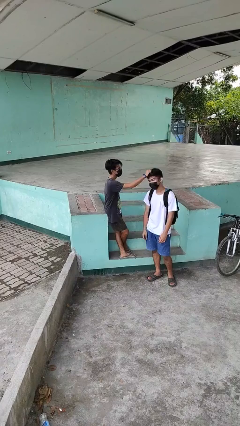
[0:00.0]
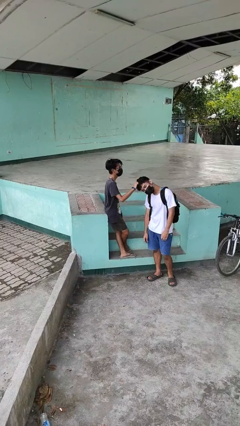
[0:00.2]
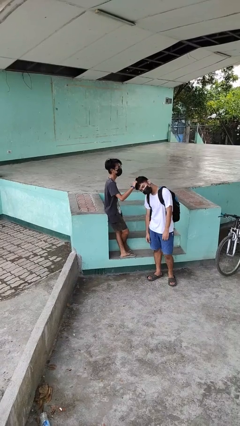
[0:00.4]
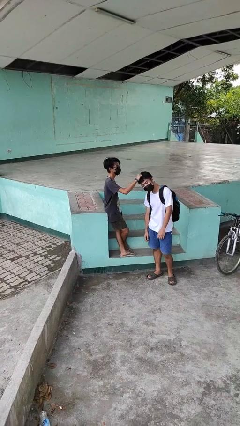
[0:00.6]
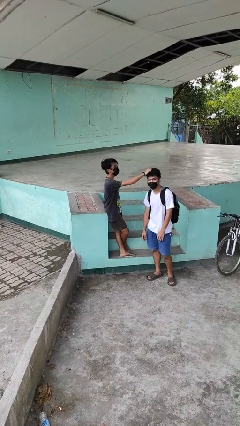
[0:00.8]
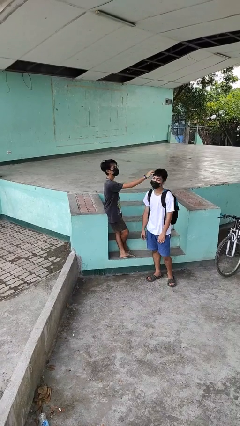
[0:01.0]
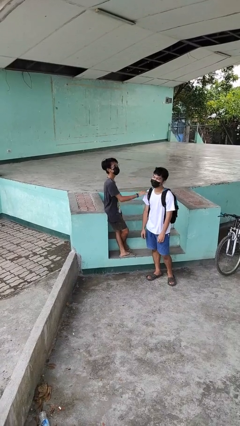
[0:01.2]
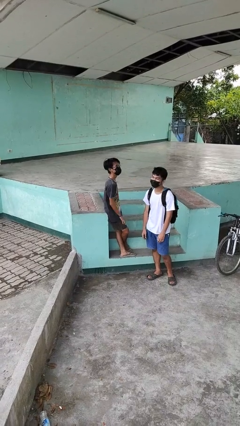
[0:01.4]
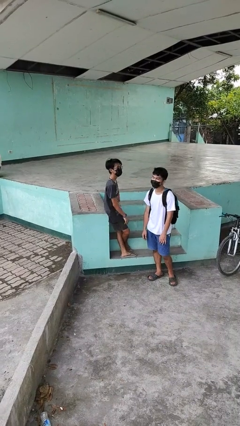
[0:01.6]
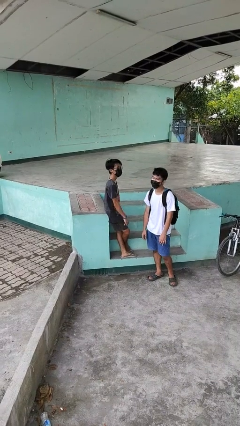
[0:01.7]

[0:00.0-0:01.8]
person grabs person by hair

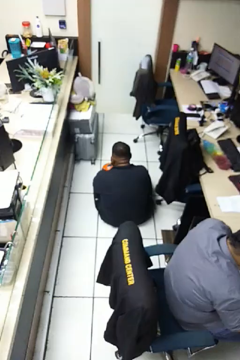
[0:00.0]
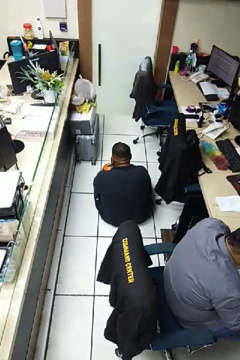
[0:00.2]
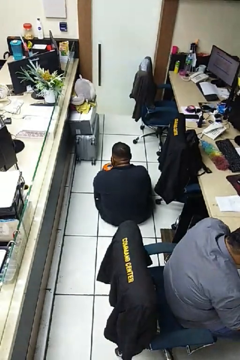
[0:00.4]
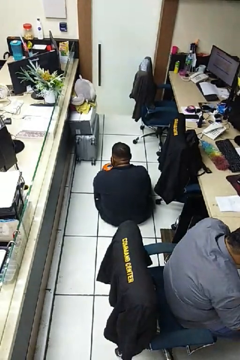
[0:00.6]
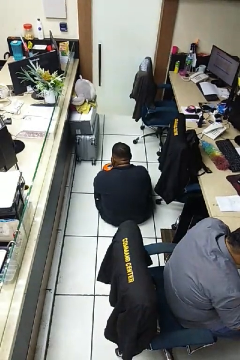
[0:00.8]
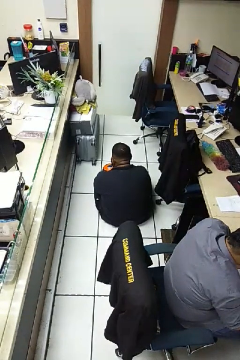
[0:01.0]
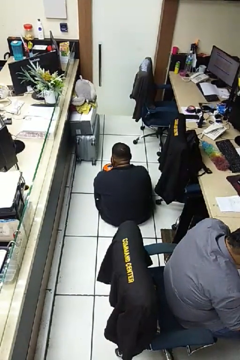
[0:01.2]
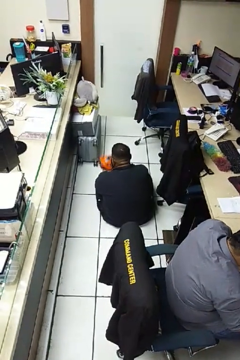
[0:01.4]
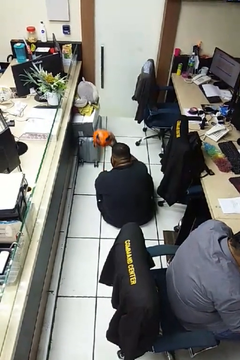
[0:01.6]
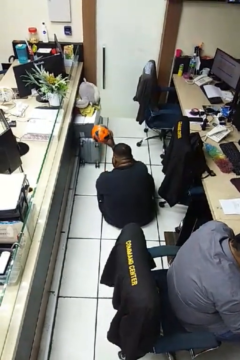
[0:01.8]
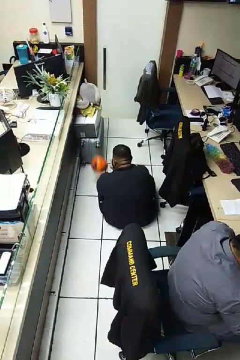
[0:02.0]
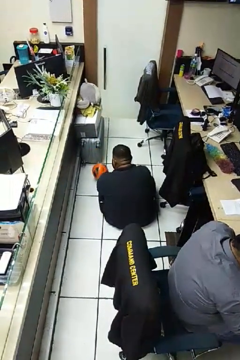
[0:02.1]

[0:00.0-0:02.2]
person bounces ball on floor

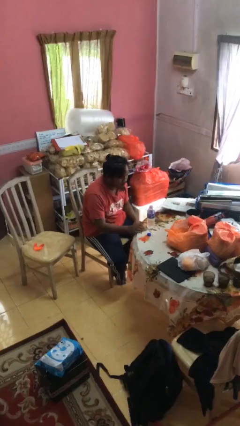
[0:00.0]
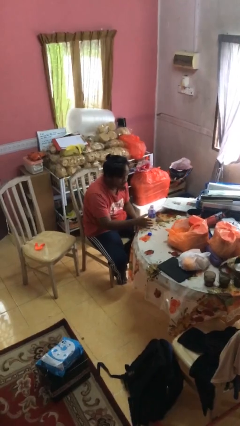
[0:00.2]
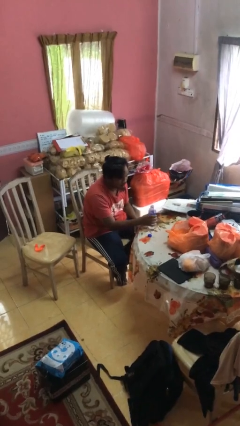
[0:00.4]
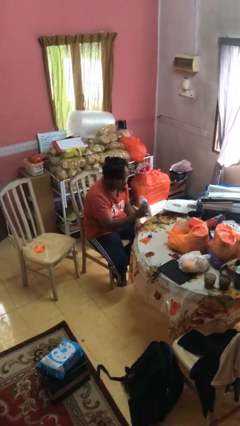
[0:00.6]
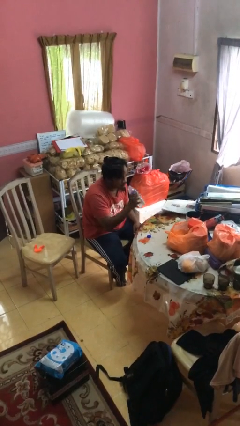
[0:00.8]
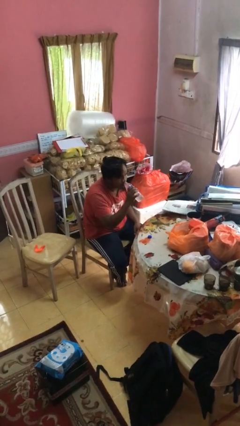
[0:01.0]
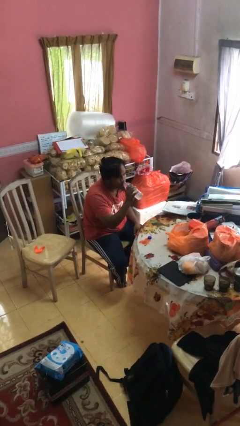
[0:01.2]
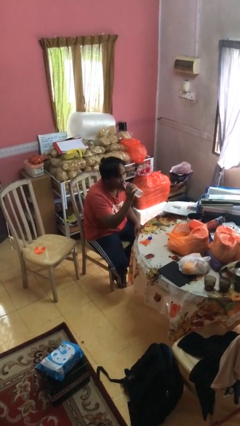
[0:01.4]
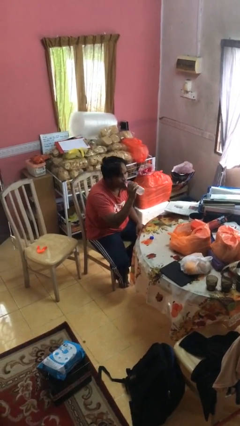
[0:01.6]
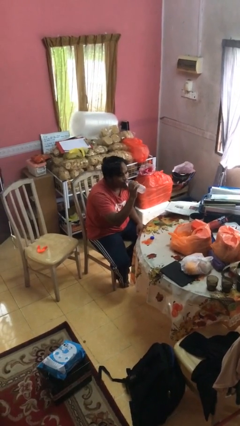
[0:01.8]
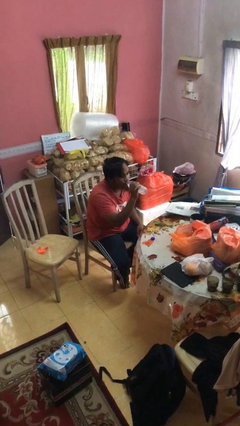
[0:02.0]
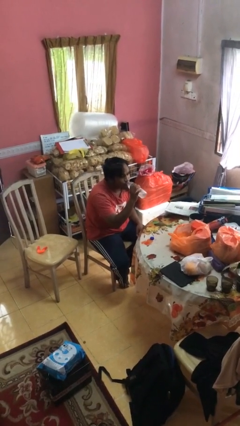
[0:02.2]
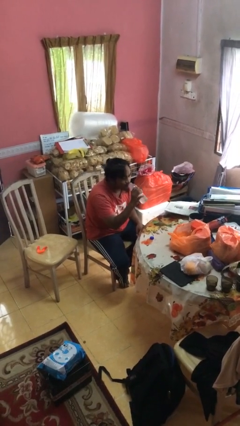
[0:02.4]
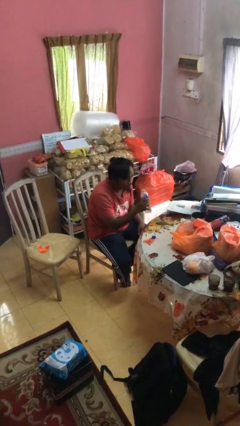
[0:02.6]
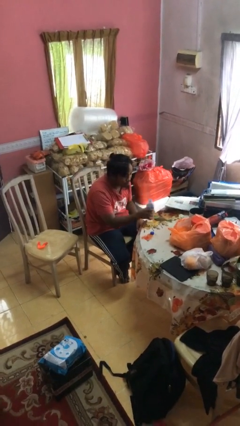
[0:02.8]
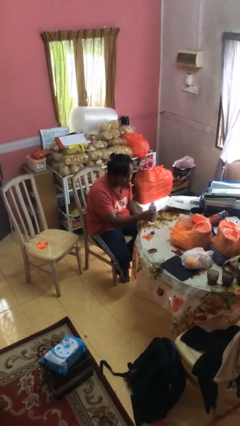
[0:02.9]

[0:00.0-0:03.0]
person drinks from bottle

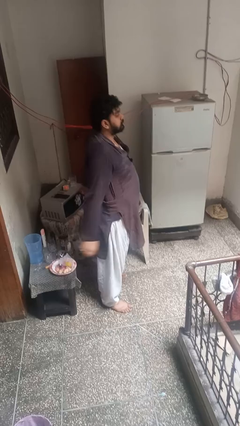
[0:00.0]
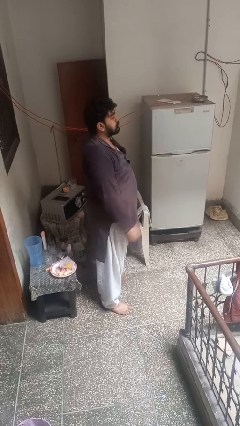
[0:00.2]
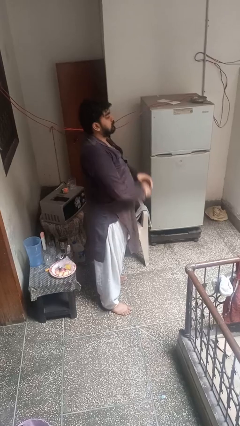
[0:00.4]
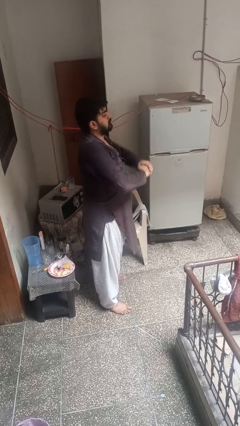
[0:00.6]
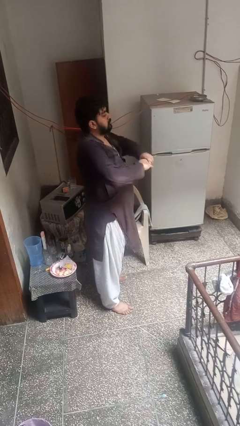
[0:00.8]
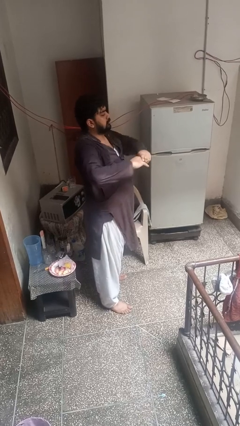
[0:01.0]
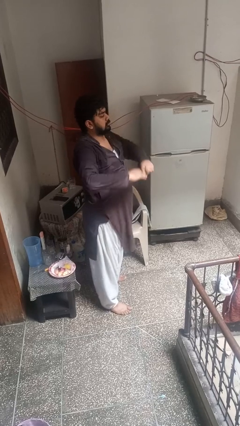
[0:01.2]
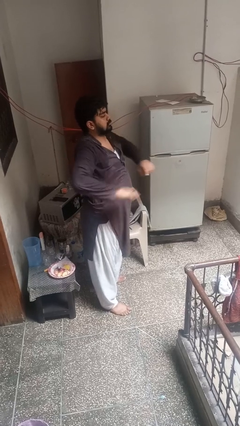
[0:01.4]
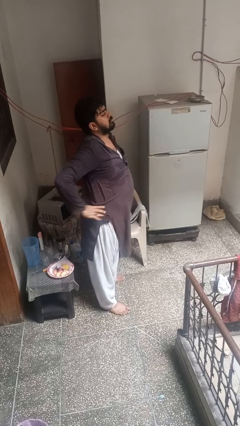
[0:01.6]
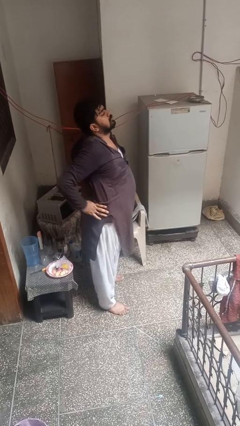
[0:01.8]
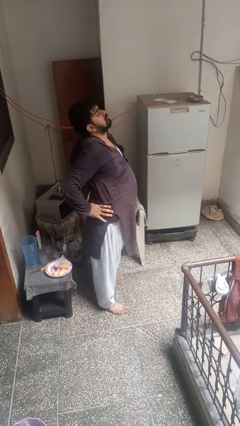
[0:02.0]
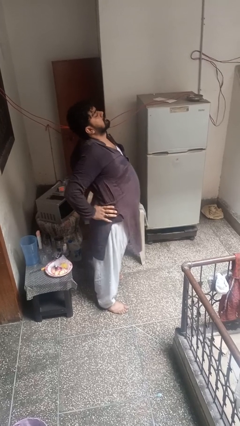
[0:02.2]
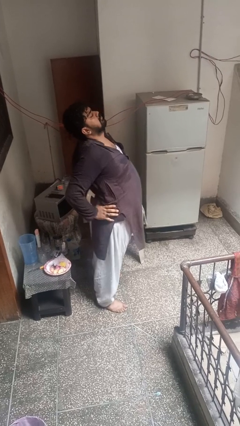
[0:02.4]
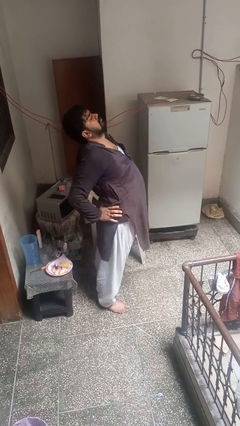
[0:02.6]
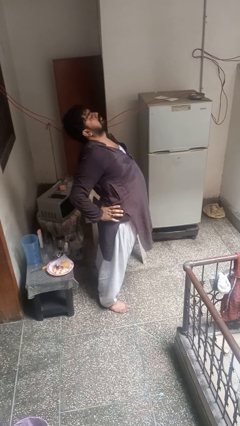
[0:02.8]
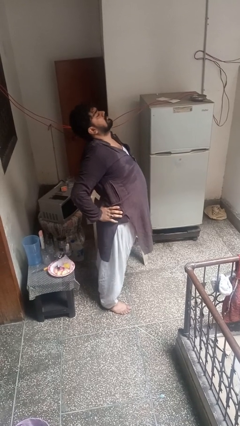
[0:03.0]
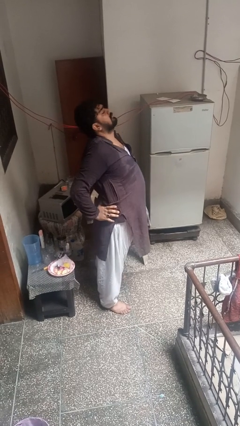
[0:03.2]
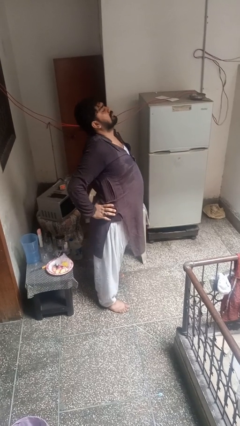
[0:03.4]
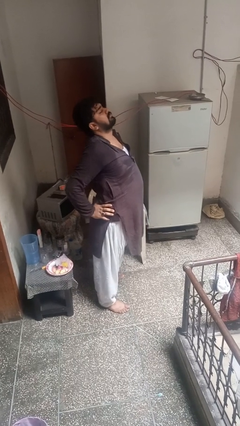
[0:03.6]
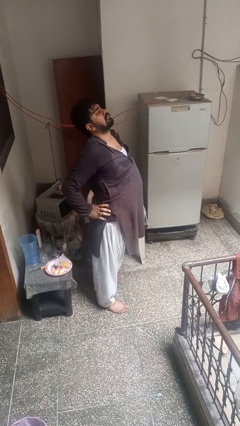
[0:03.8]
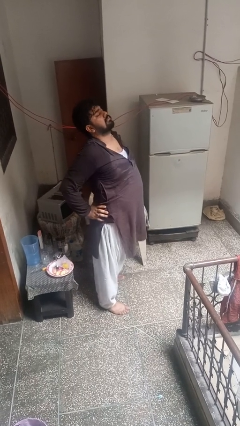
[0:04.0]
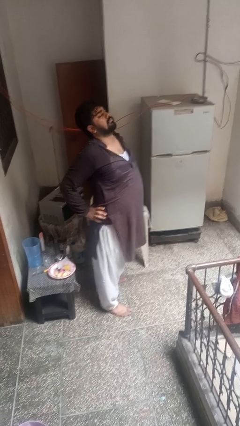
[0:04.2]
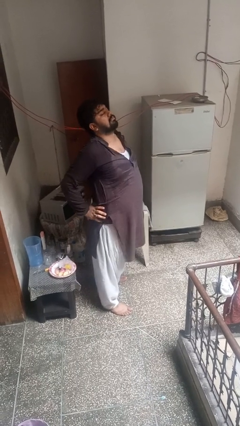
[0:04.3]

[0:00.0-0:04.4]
person stretches back

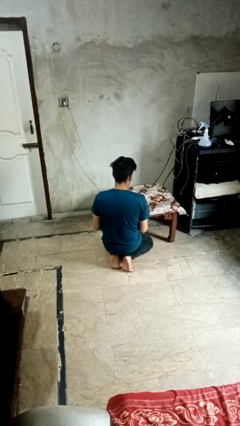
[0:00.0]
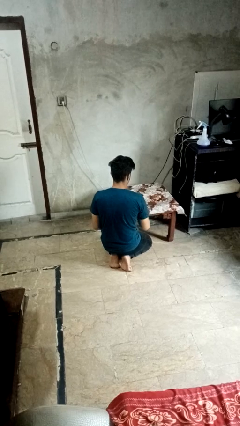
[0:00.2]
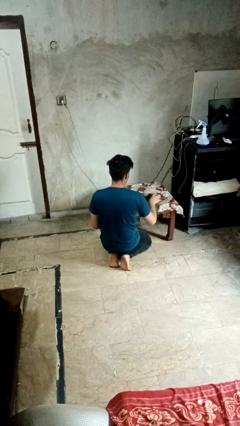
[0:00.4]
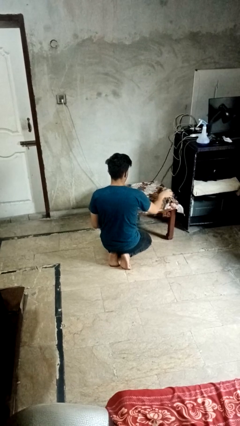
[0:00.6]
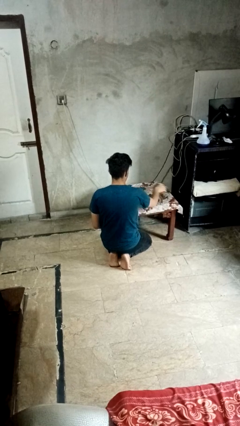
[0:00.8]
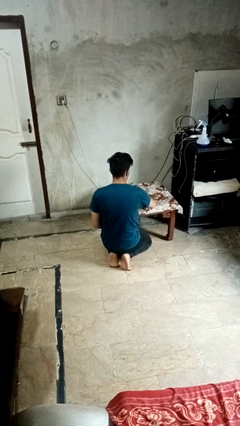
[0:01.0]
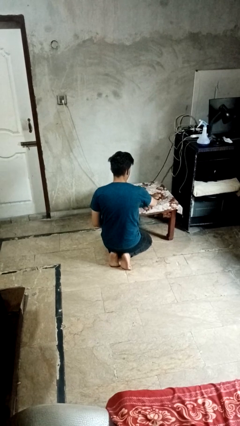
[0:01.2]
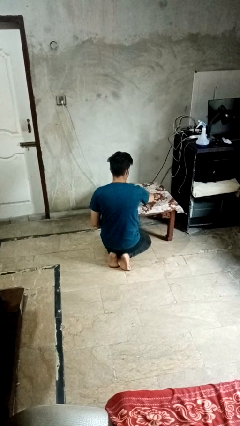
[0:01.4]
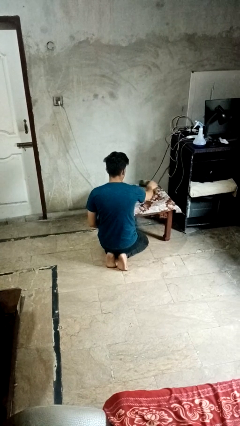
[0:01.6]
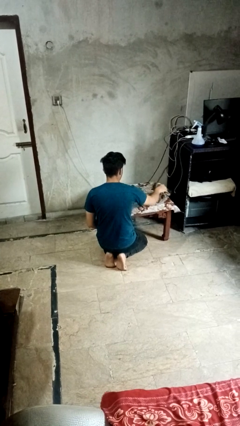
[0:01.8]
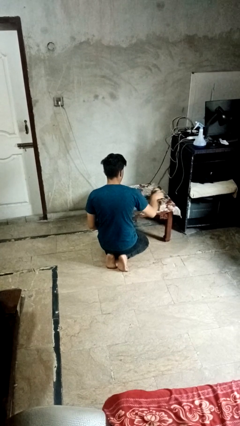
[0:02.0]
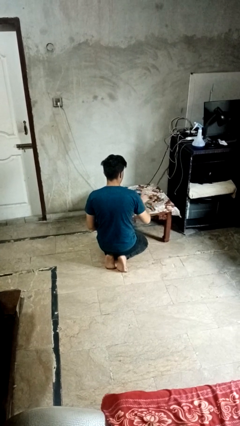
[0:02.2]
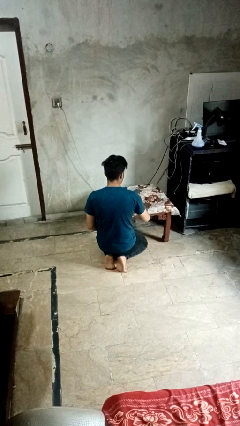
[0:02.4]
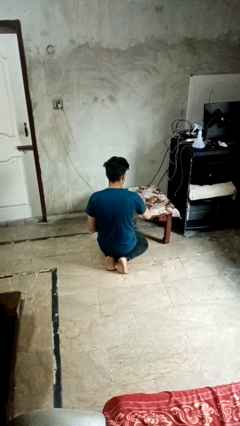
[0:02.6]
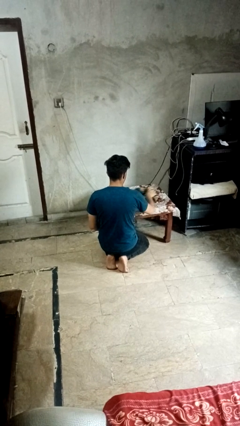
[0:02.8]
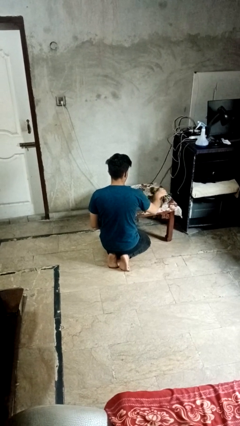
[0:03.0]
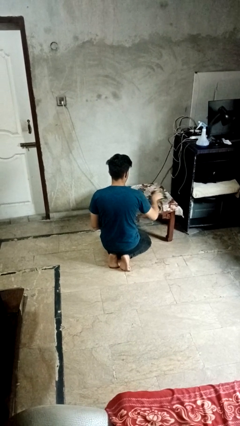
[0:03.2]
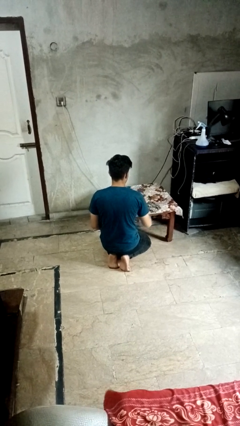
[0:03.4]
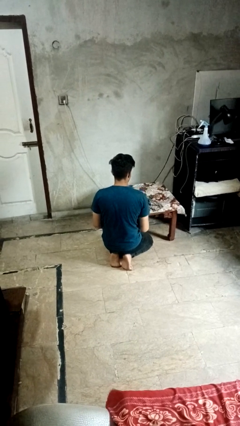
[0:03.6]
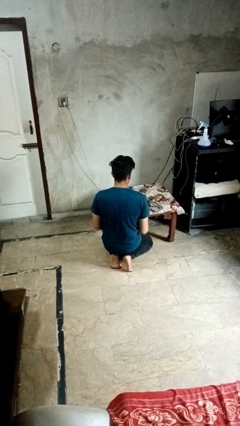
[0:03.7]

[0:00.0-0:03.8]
person cleans table with rag

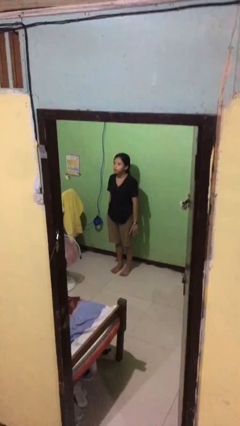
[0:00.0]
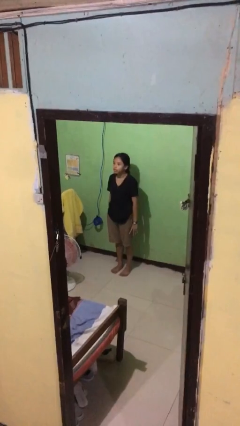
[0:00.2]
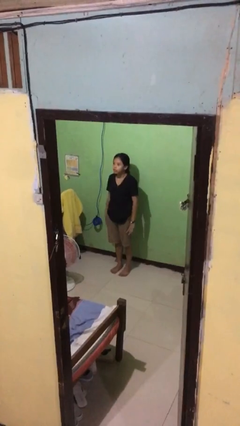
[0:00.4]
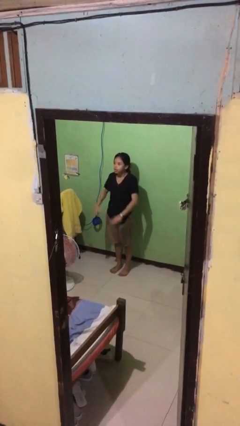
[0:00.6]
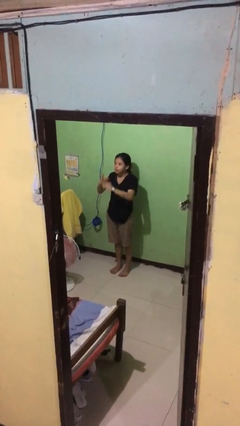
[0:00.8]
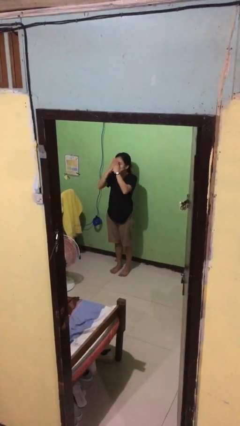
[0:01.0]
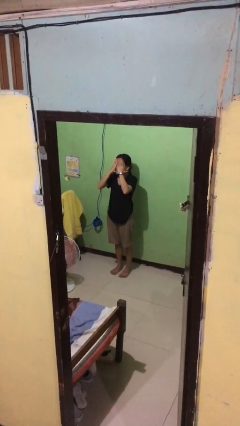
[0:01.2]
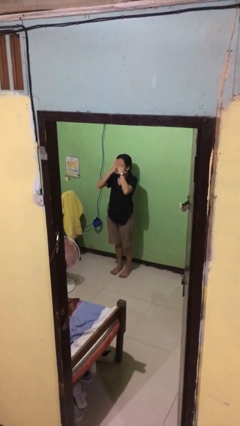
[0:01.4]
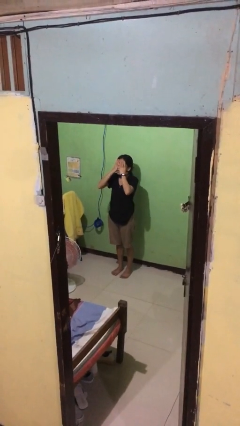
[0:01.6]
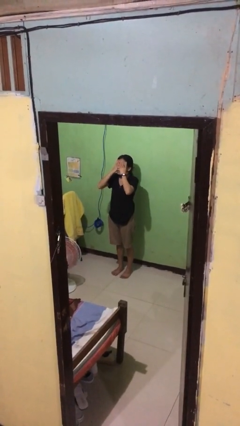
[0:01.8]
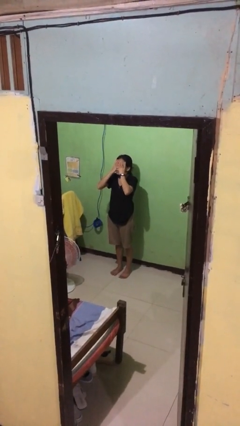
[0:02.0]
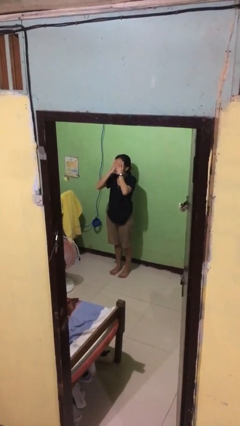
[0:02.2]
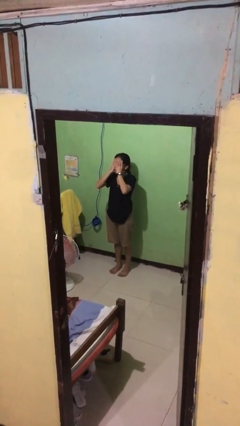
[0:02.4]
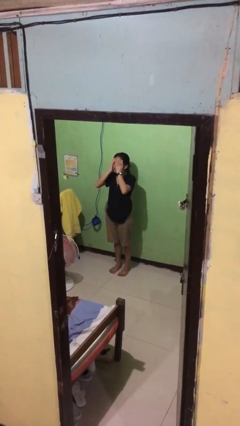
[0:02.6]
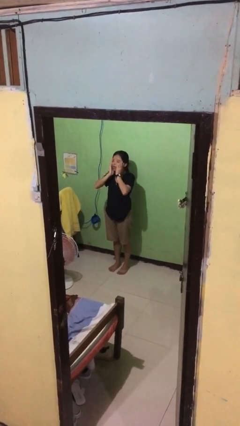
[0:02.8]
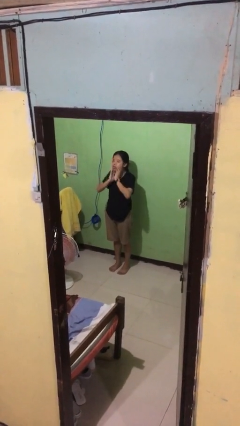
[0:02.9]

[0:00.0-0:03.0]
person covers face with hands
